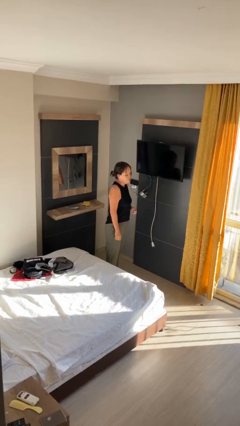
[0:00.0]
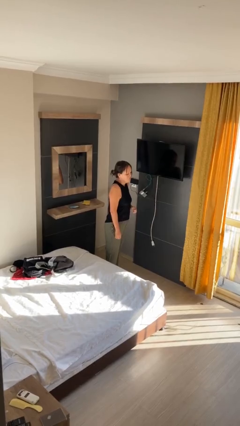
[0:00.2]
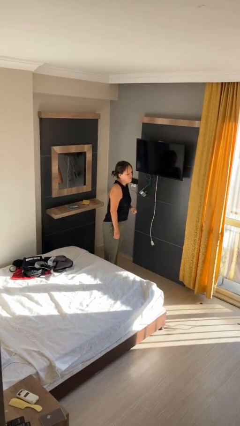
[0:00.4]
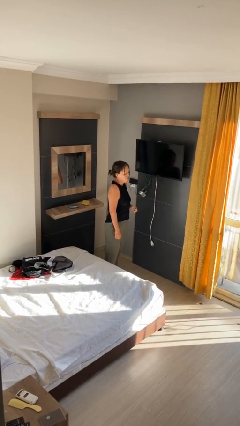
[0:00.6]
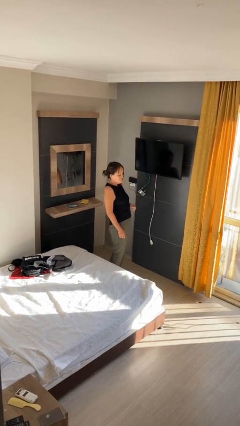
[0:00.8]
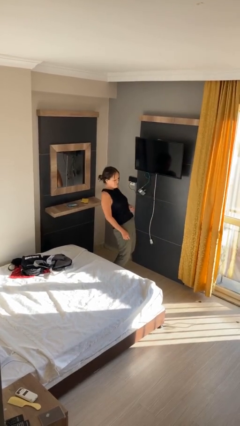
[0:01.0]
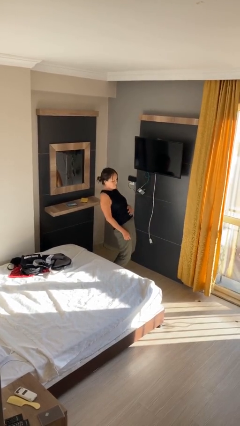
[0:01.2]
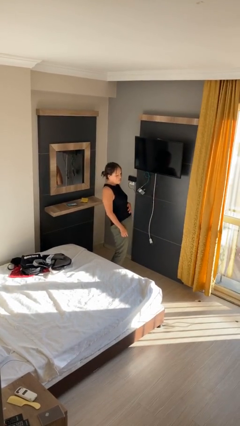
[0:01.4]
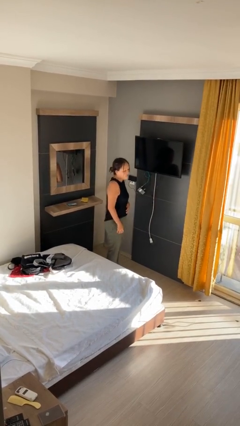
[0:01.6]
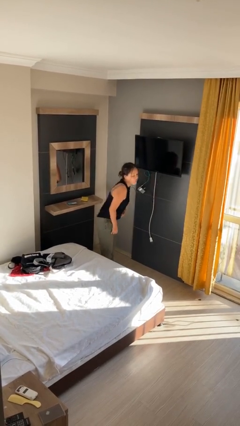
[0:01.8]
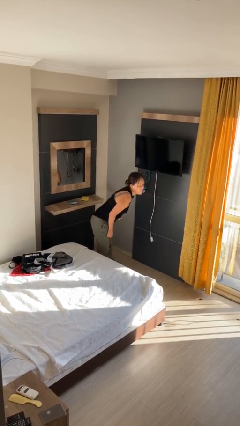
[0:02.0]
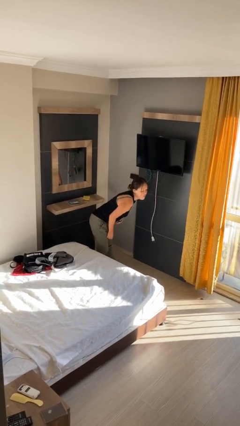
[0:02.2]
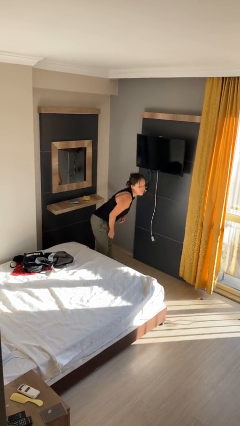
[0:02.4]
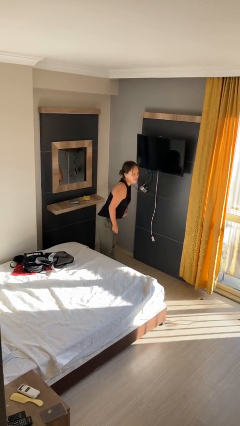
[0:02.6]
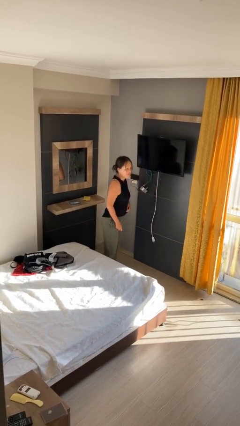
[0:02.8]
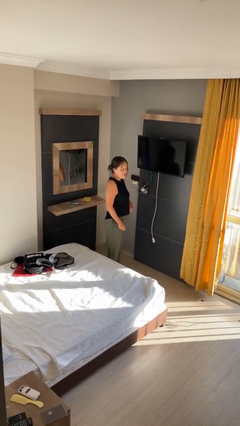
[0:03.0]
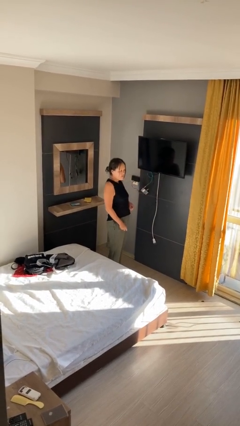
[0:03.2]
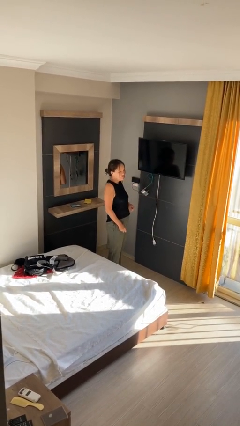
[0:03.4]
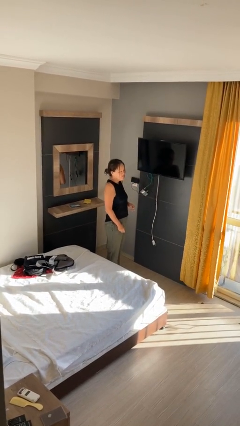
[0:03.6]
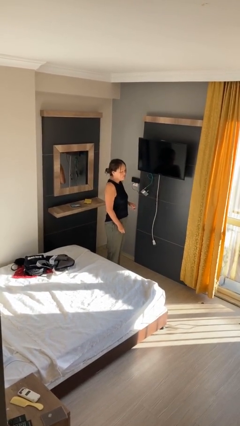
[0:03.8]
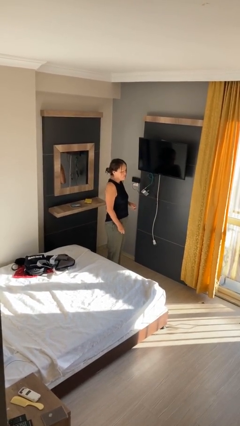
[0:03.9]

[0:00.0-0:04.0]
person wiggles hips

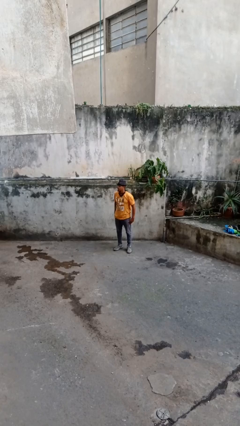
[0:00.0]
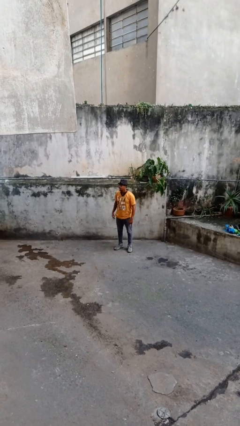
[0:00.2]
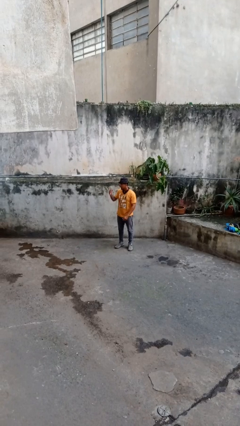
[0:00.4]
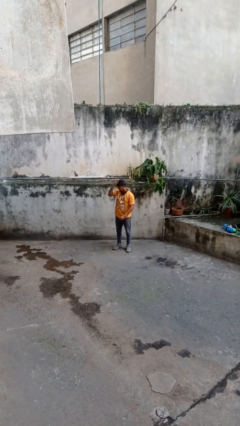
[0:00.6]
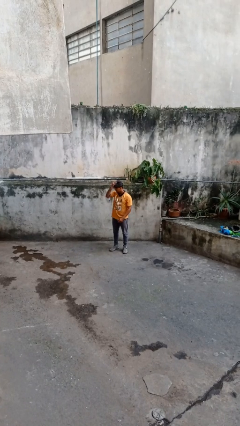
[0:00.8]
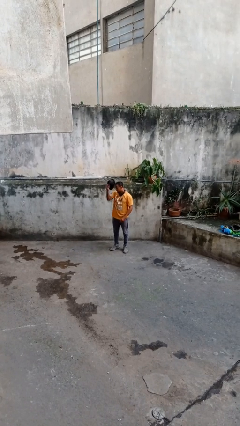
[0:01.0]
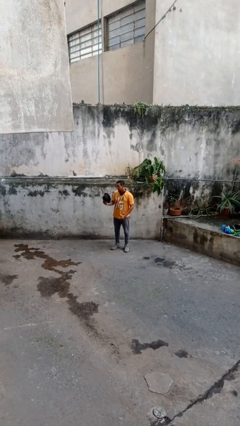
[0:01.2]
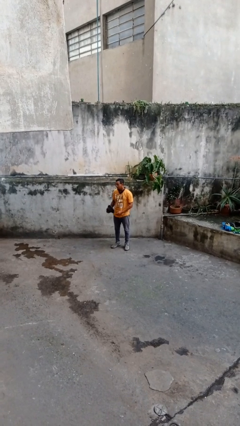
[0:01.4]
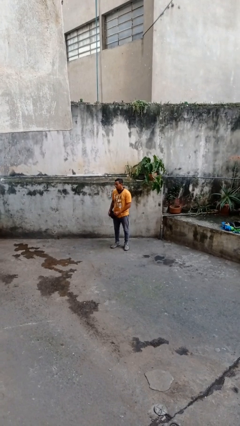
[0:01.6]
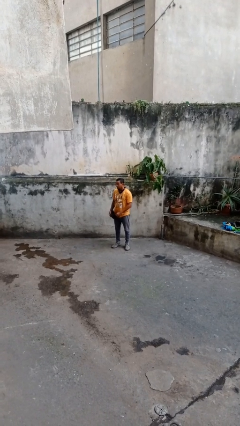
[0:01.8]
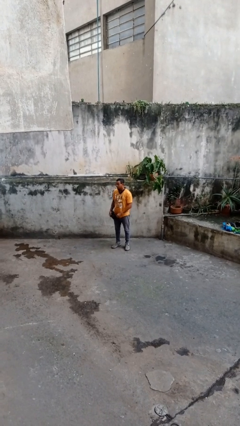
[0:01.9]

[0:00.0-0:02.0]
person takes off hat

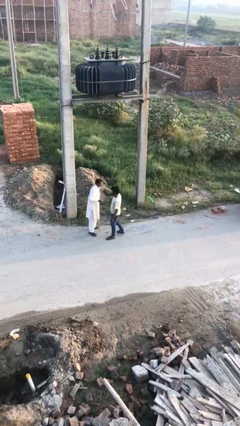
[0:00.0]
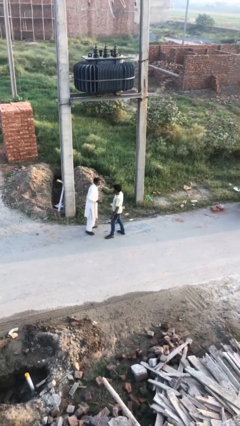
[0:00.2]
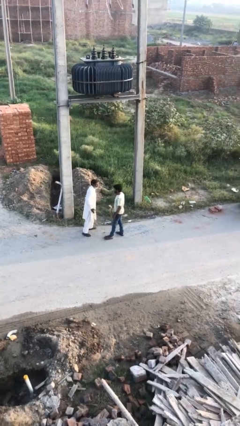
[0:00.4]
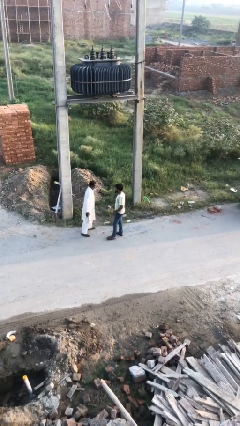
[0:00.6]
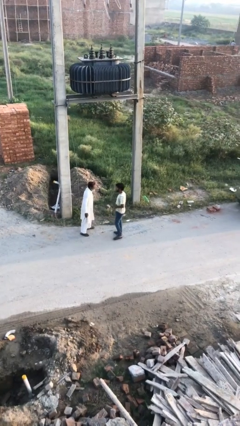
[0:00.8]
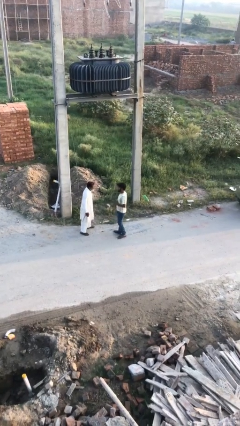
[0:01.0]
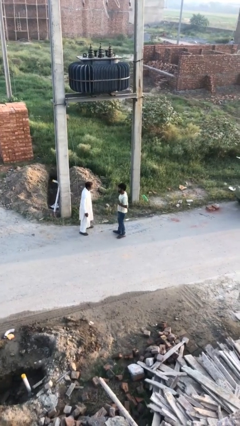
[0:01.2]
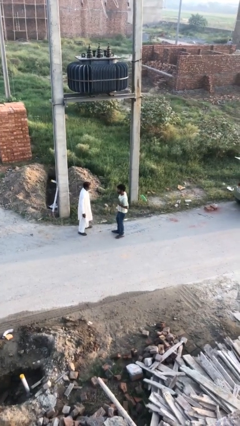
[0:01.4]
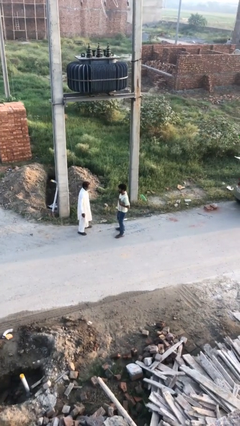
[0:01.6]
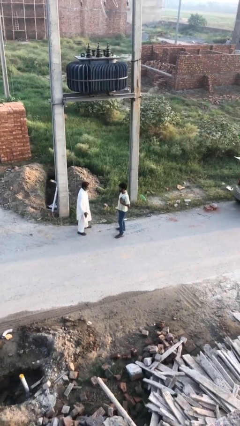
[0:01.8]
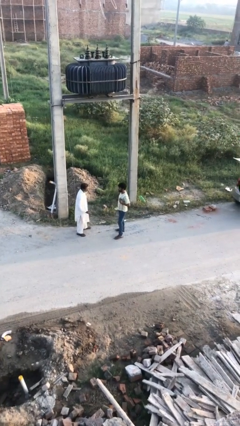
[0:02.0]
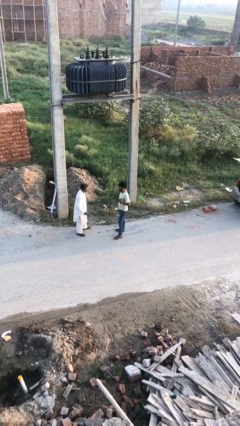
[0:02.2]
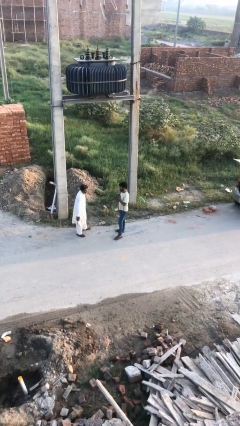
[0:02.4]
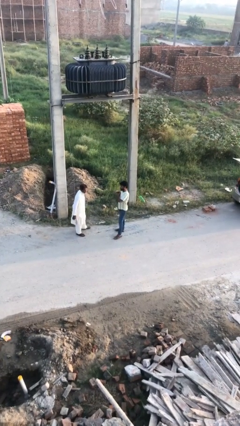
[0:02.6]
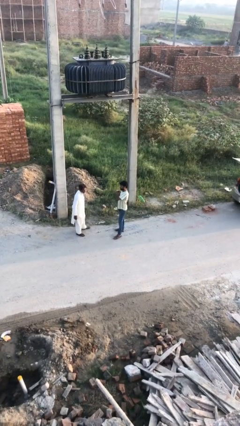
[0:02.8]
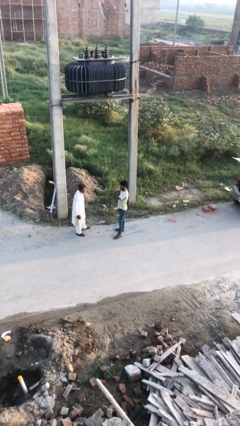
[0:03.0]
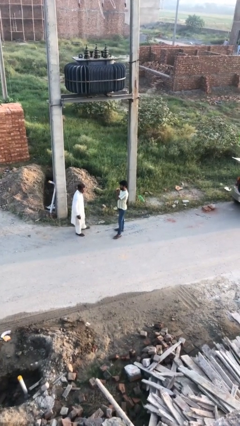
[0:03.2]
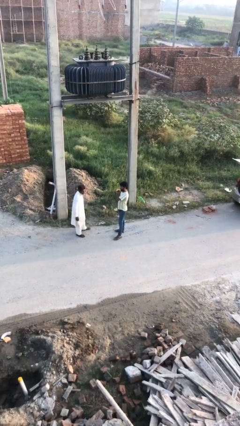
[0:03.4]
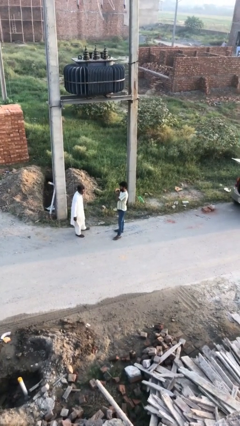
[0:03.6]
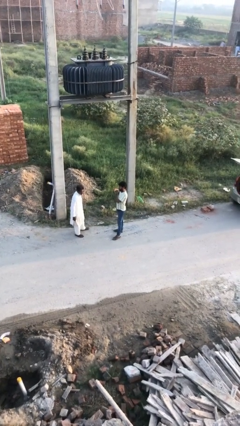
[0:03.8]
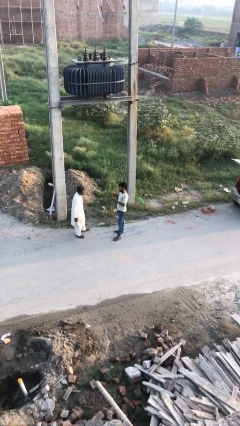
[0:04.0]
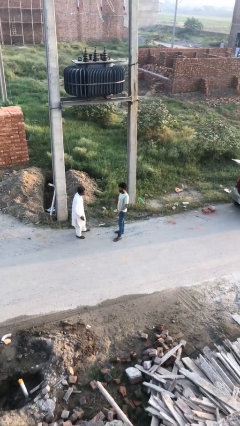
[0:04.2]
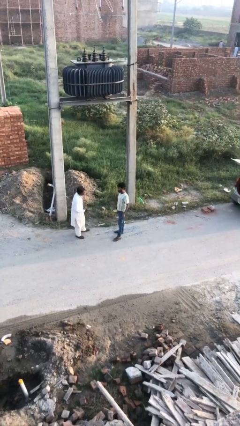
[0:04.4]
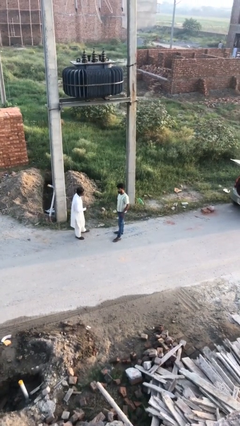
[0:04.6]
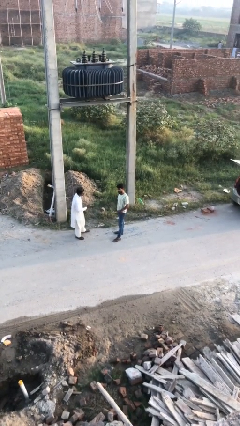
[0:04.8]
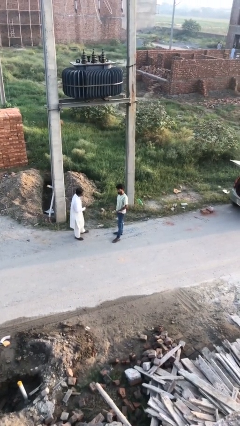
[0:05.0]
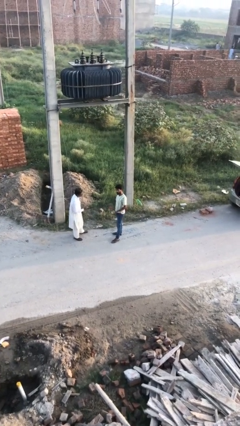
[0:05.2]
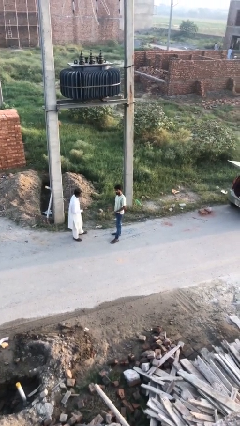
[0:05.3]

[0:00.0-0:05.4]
person talks to person

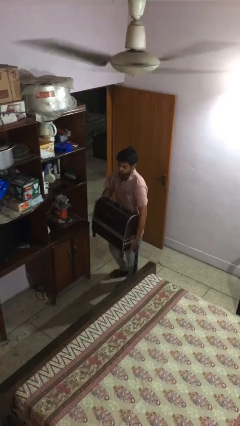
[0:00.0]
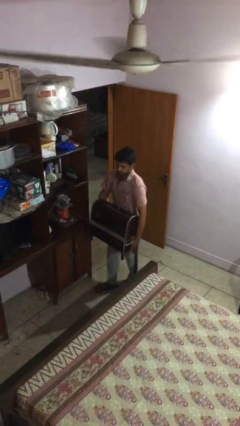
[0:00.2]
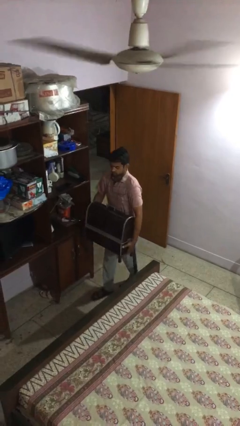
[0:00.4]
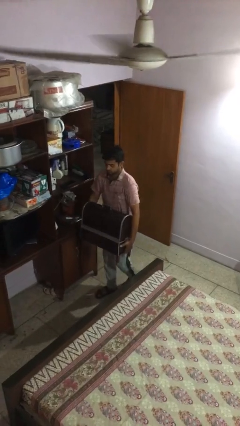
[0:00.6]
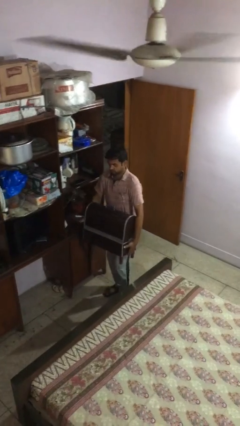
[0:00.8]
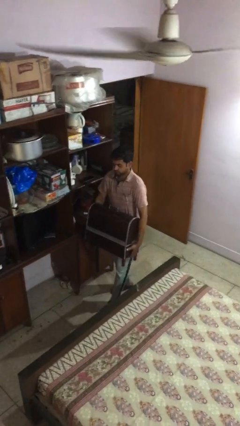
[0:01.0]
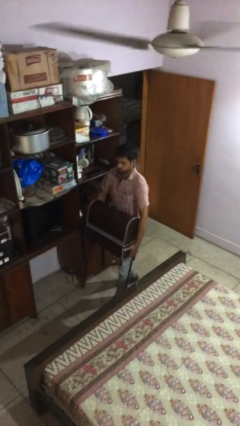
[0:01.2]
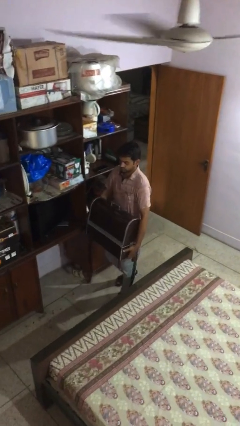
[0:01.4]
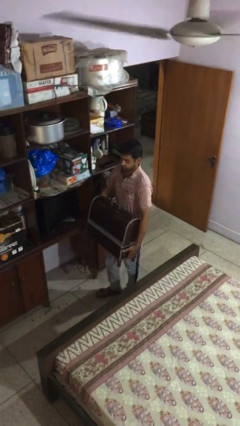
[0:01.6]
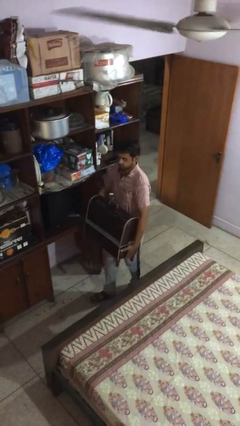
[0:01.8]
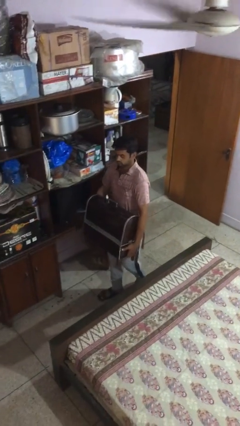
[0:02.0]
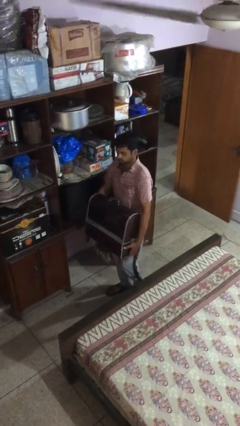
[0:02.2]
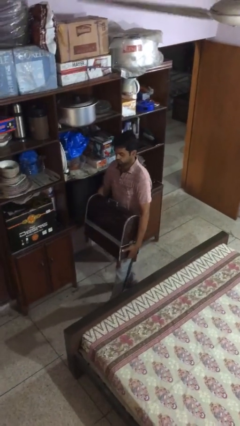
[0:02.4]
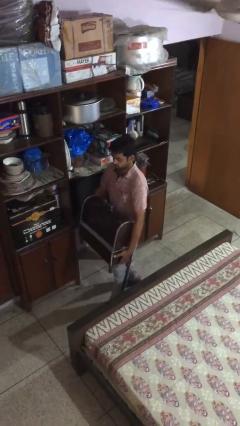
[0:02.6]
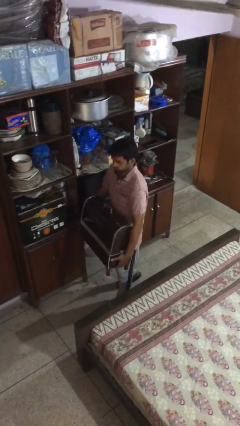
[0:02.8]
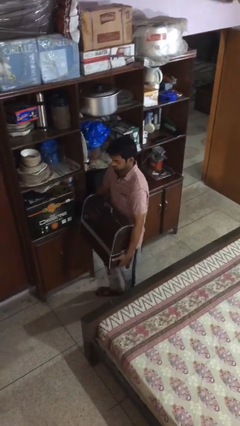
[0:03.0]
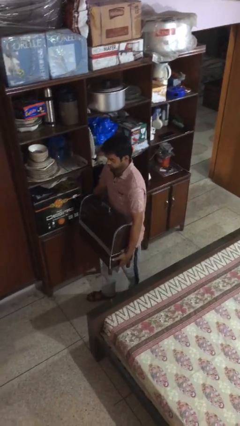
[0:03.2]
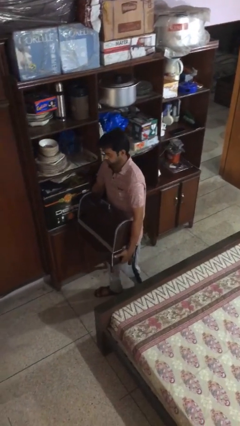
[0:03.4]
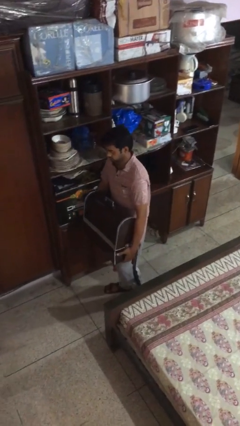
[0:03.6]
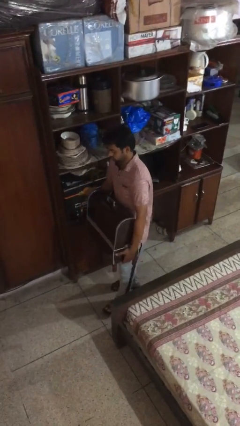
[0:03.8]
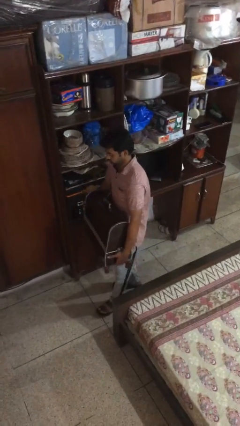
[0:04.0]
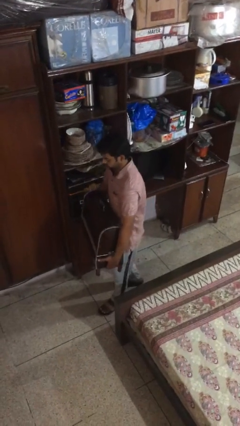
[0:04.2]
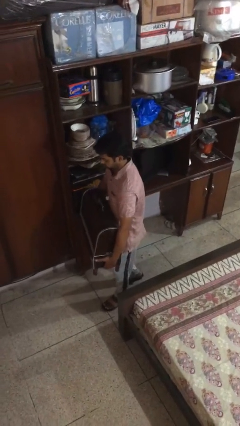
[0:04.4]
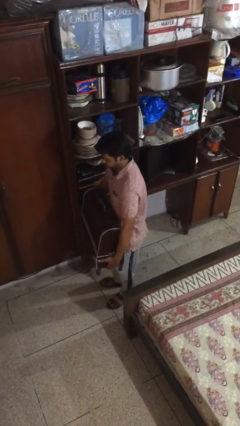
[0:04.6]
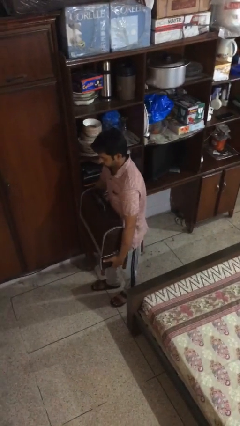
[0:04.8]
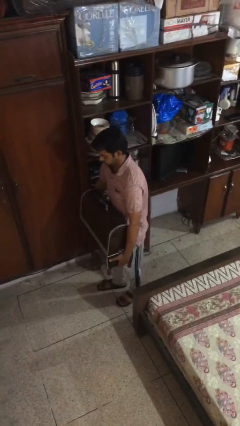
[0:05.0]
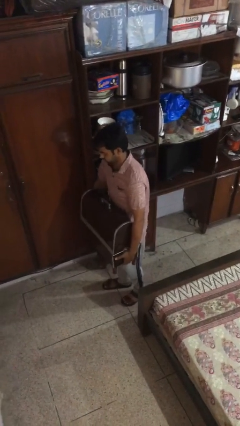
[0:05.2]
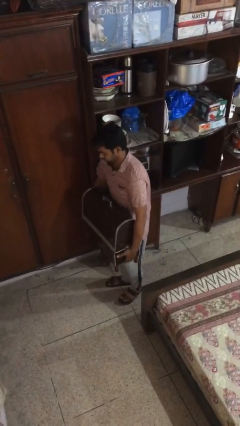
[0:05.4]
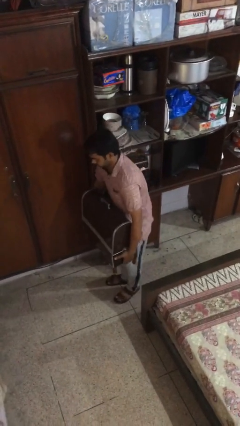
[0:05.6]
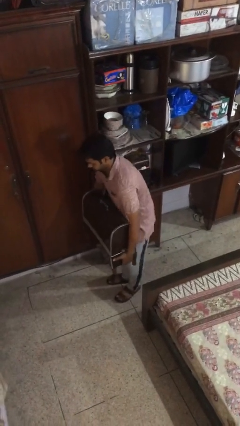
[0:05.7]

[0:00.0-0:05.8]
person carries heavy object

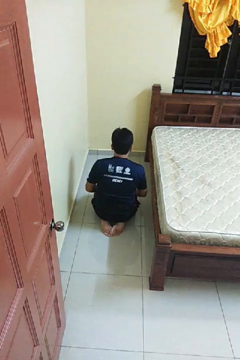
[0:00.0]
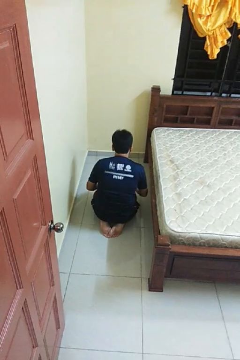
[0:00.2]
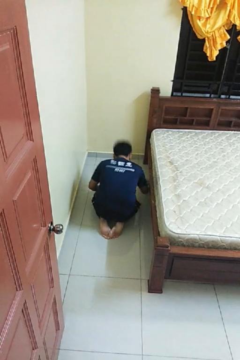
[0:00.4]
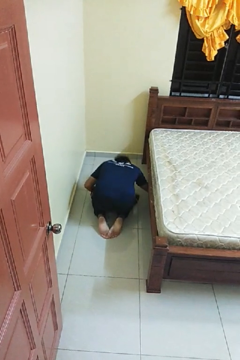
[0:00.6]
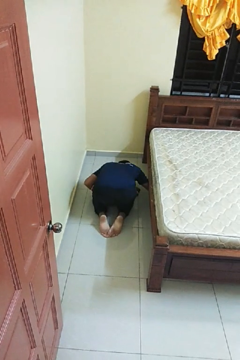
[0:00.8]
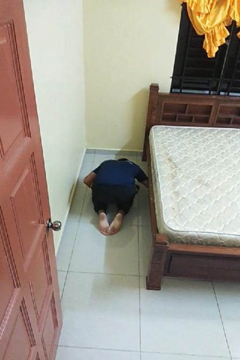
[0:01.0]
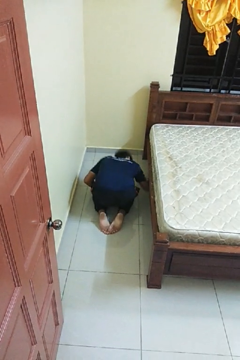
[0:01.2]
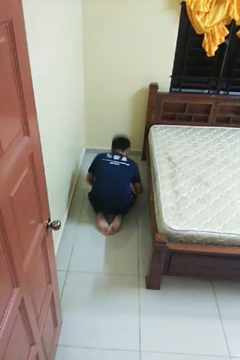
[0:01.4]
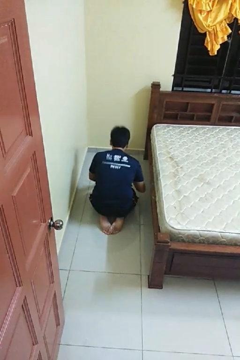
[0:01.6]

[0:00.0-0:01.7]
person searches under bed
